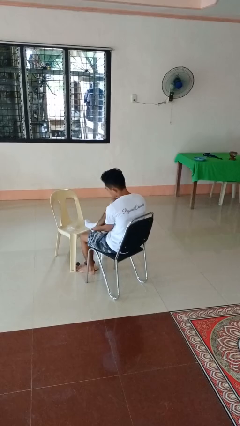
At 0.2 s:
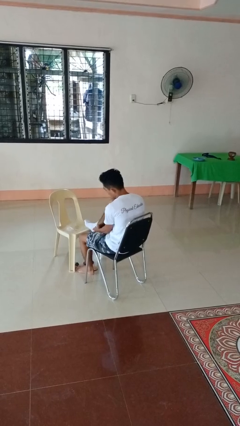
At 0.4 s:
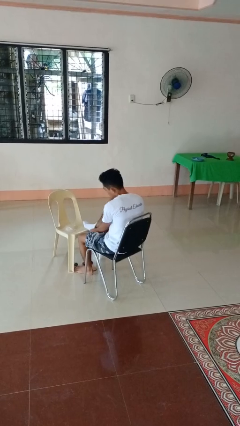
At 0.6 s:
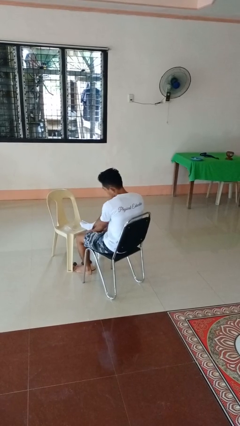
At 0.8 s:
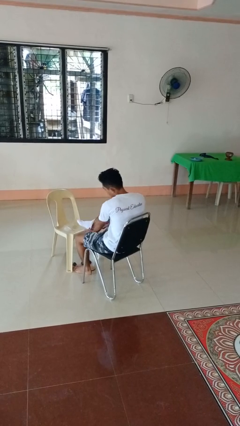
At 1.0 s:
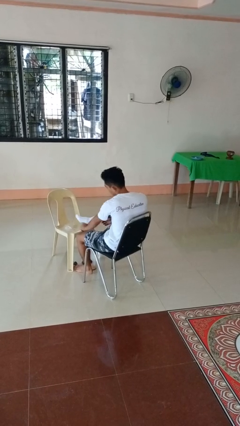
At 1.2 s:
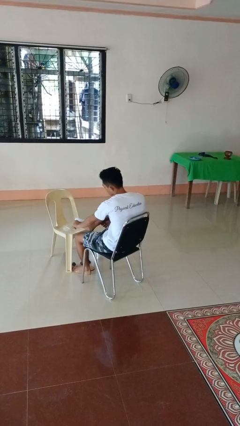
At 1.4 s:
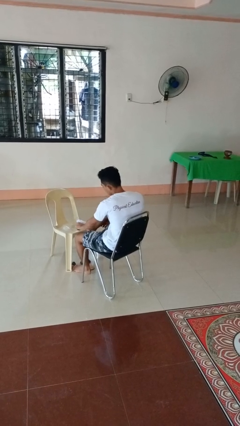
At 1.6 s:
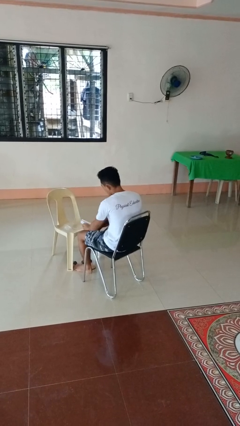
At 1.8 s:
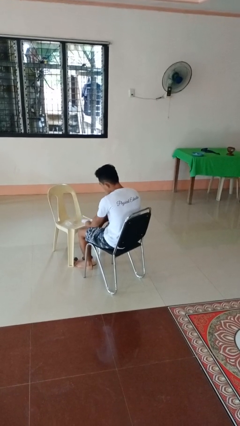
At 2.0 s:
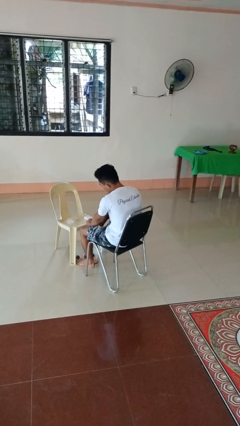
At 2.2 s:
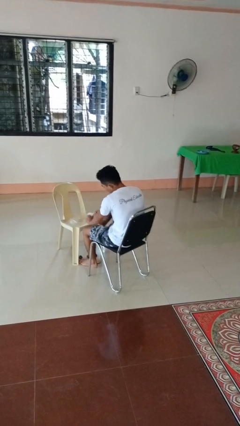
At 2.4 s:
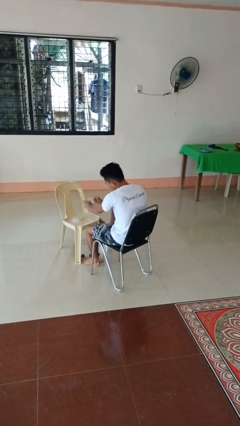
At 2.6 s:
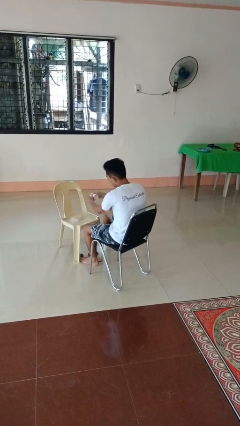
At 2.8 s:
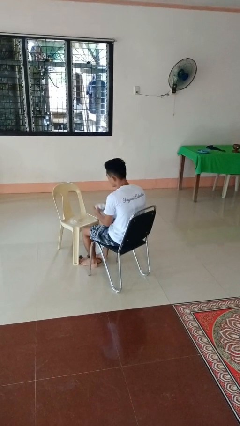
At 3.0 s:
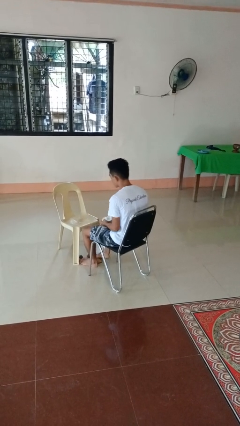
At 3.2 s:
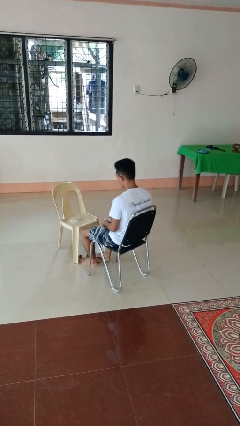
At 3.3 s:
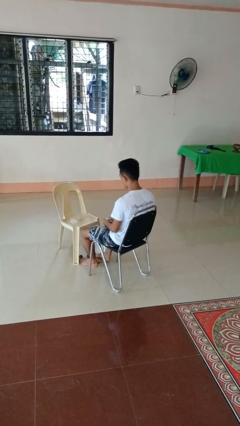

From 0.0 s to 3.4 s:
person takes off socks

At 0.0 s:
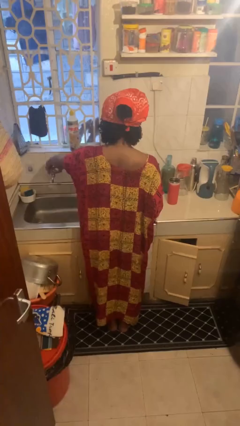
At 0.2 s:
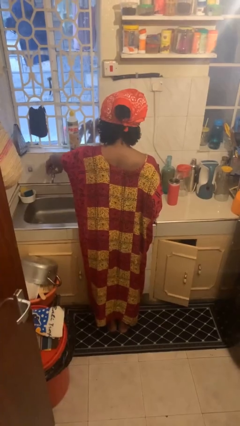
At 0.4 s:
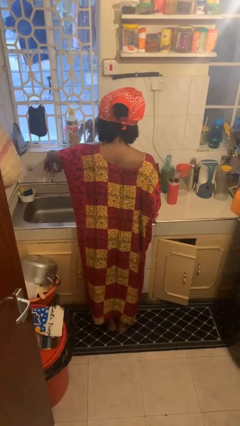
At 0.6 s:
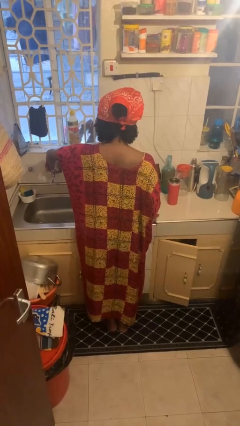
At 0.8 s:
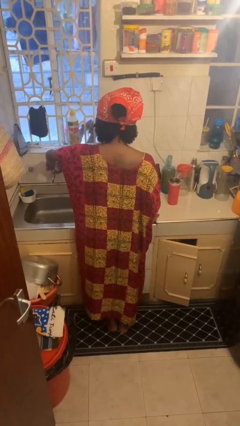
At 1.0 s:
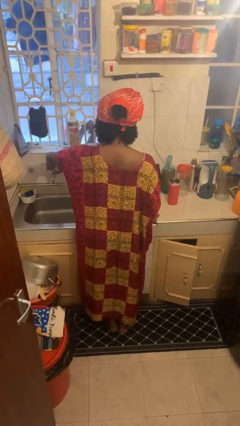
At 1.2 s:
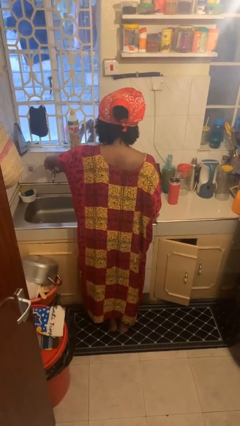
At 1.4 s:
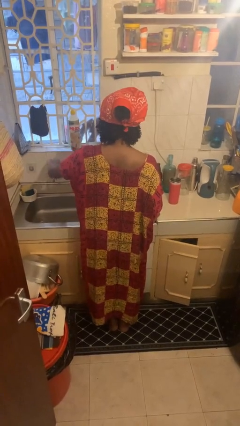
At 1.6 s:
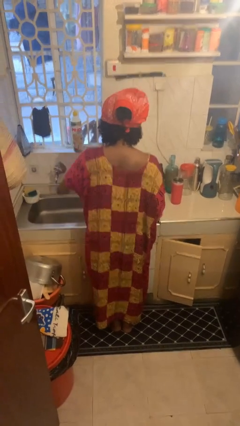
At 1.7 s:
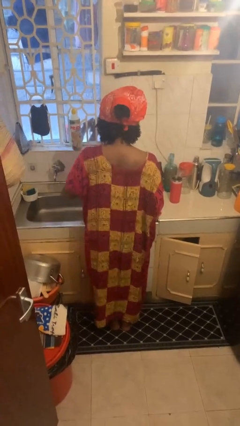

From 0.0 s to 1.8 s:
person turns off faucet

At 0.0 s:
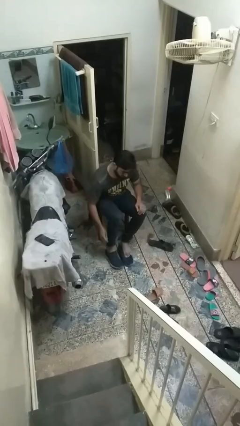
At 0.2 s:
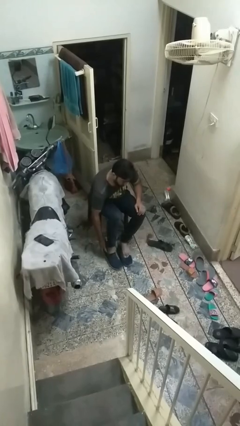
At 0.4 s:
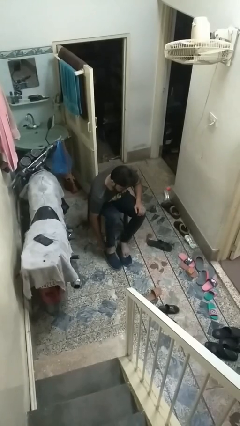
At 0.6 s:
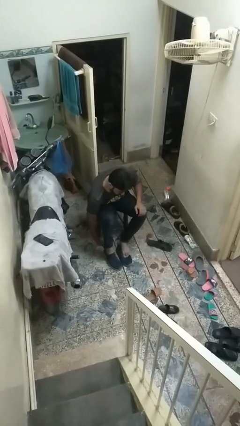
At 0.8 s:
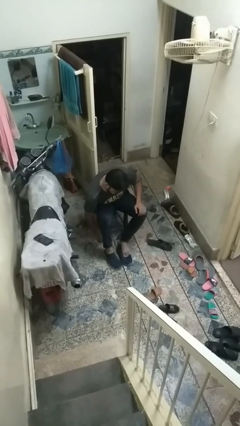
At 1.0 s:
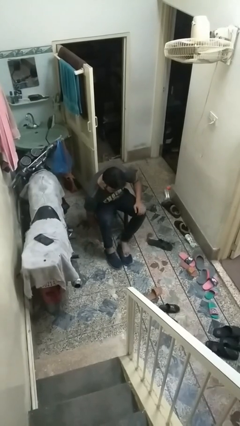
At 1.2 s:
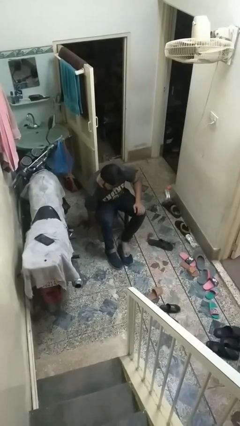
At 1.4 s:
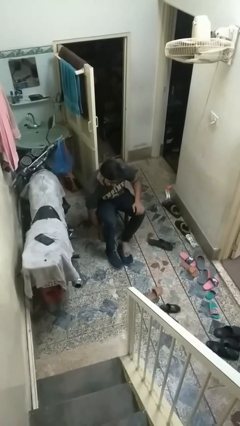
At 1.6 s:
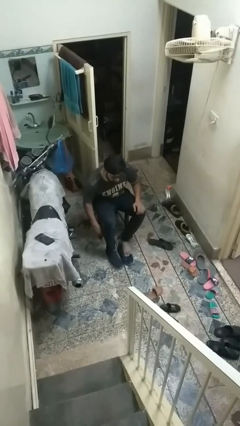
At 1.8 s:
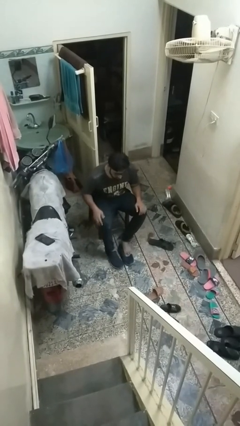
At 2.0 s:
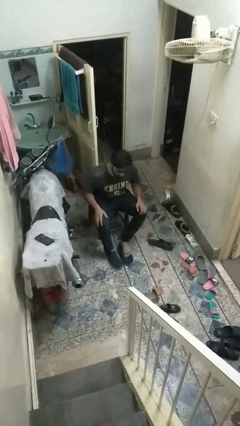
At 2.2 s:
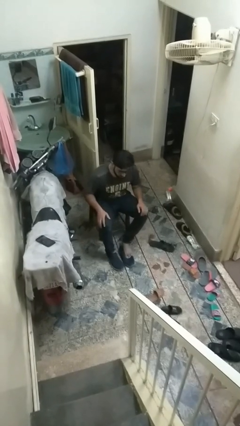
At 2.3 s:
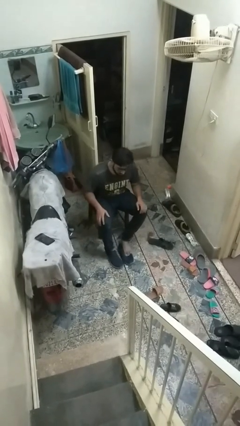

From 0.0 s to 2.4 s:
person puts on shoes

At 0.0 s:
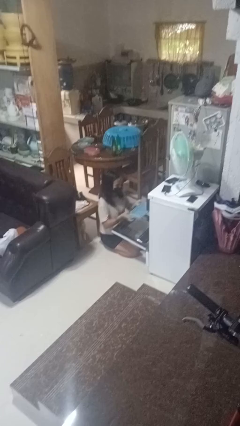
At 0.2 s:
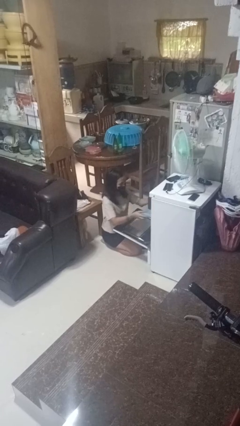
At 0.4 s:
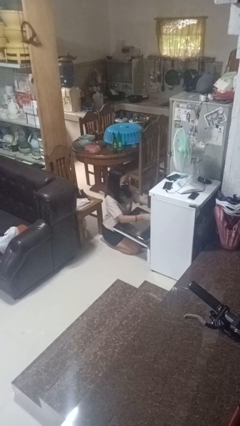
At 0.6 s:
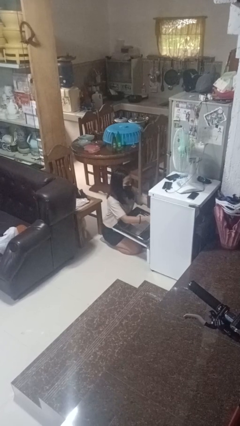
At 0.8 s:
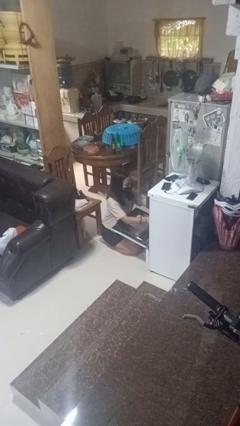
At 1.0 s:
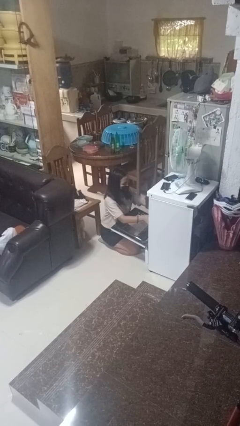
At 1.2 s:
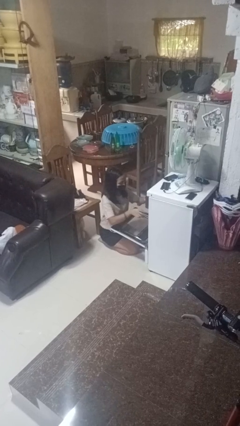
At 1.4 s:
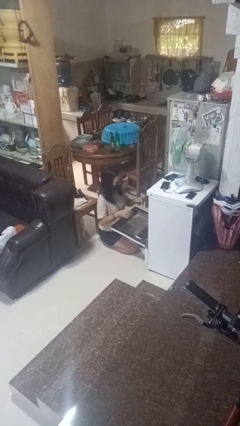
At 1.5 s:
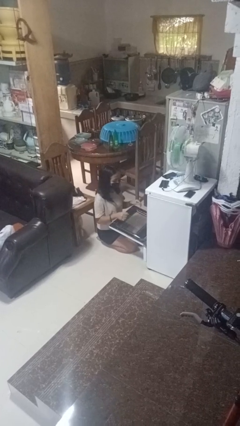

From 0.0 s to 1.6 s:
person puts object into oven

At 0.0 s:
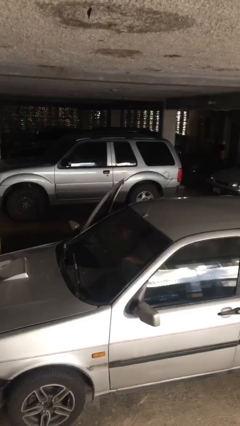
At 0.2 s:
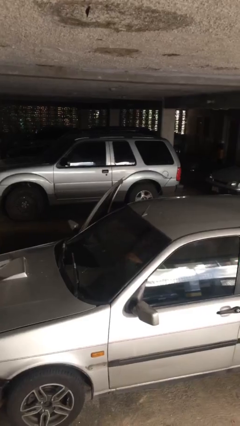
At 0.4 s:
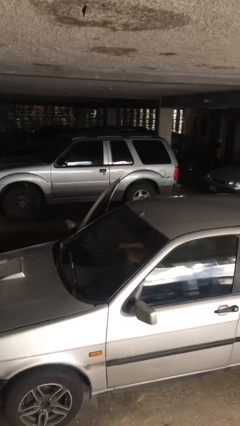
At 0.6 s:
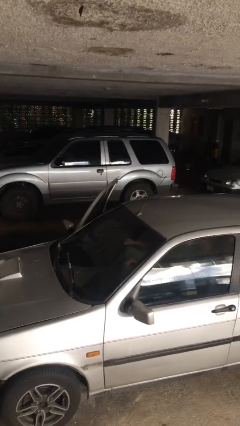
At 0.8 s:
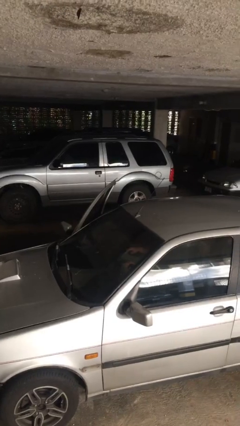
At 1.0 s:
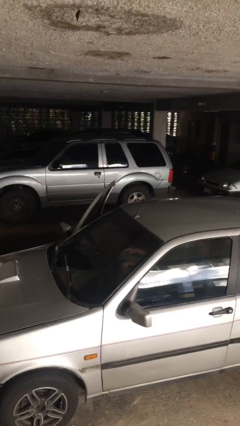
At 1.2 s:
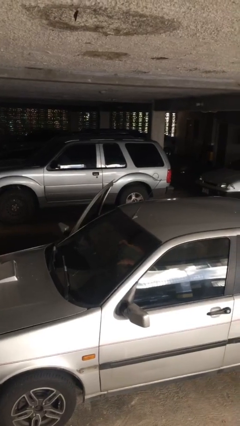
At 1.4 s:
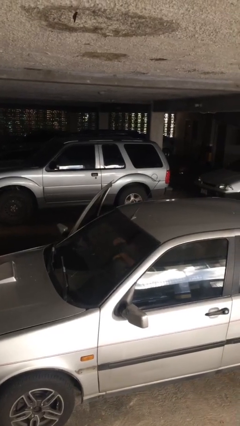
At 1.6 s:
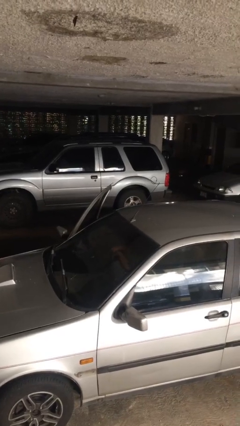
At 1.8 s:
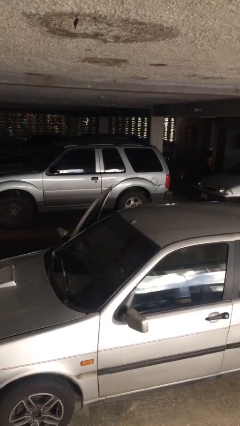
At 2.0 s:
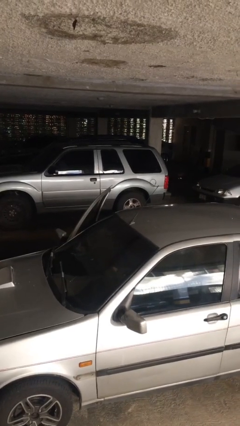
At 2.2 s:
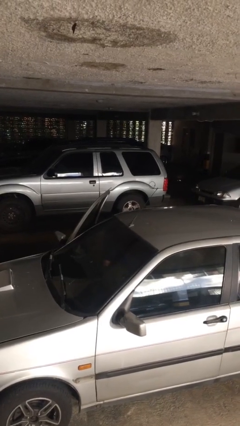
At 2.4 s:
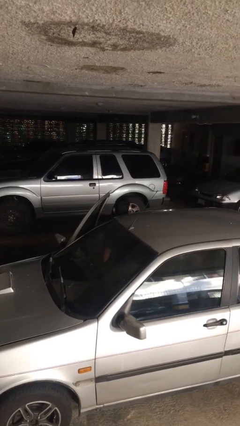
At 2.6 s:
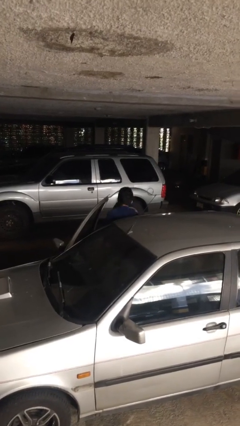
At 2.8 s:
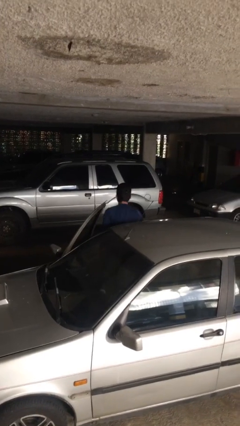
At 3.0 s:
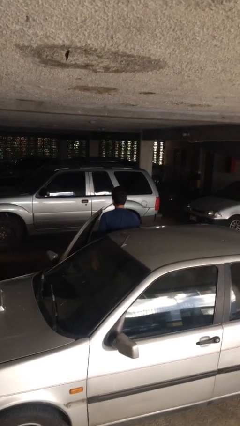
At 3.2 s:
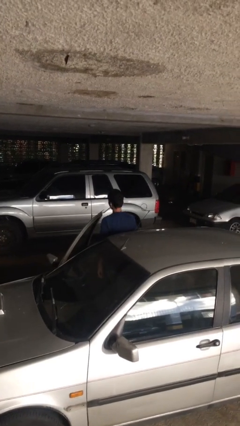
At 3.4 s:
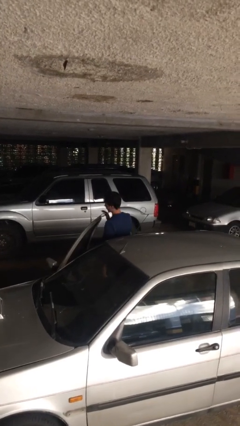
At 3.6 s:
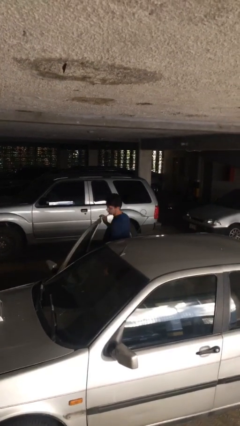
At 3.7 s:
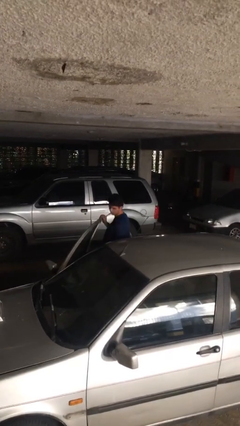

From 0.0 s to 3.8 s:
person exits car

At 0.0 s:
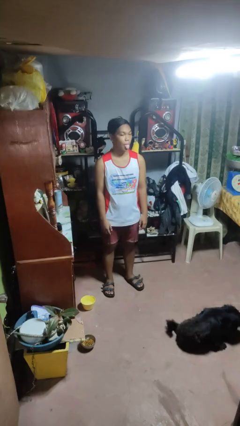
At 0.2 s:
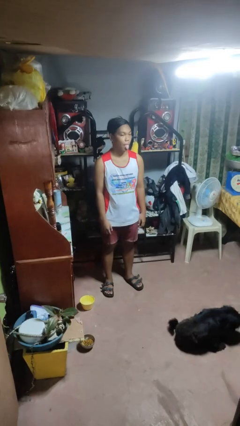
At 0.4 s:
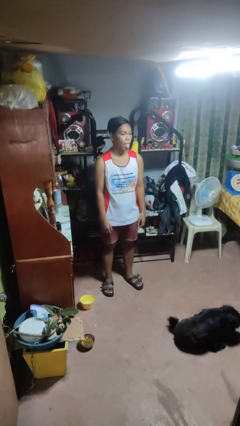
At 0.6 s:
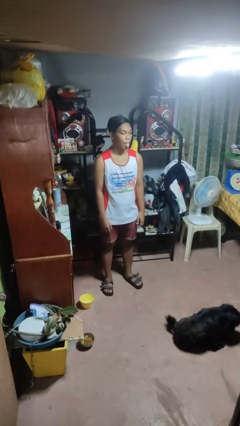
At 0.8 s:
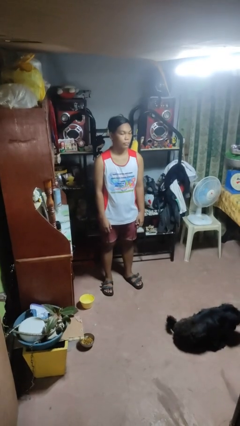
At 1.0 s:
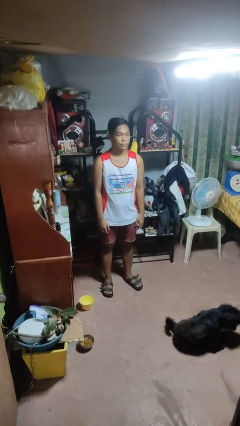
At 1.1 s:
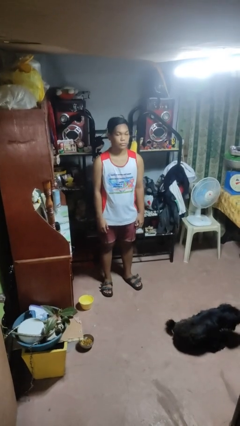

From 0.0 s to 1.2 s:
person sticks out tongue

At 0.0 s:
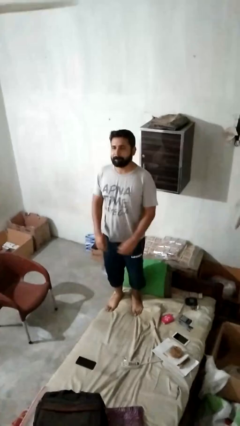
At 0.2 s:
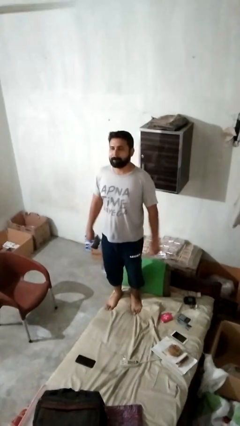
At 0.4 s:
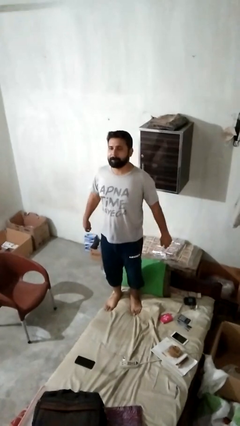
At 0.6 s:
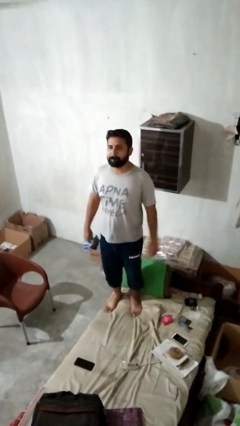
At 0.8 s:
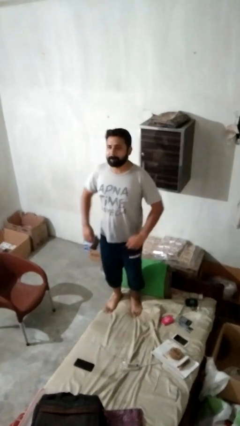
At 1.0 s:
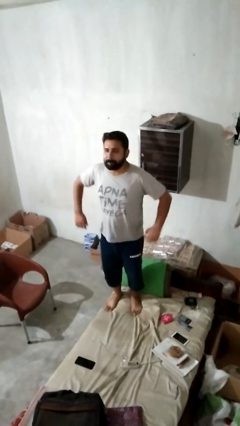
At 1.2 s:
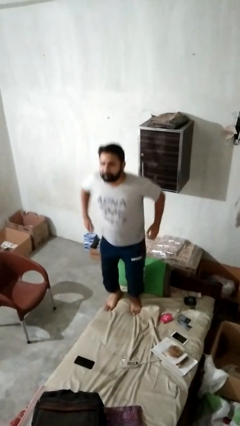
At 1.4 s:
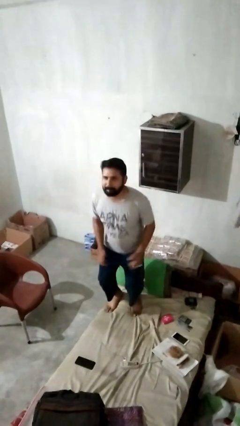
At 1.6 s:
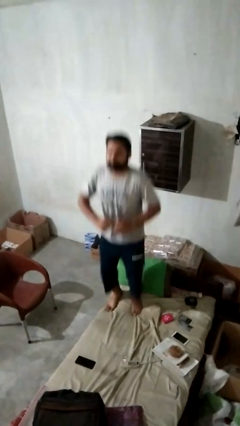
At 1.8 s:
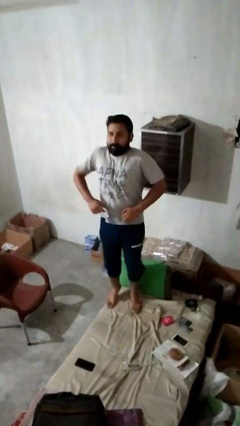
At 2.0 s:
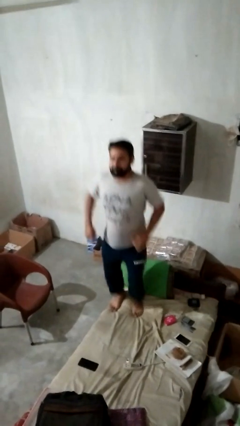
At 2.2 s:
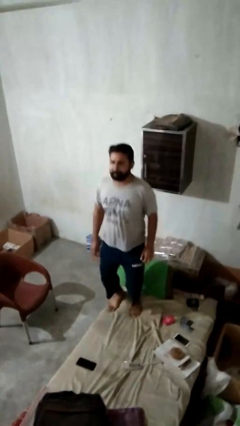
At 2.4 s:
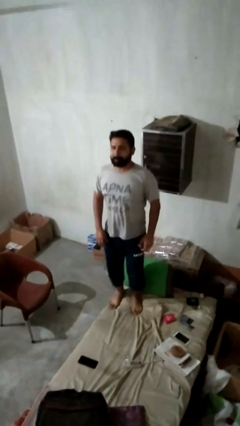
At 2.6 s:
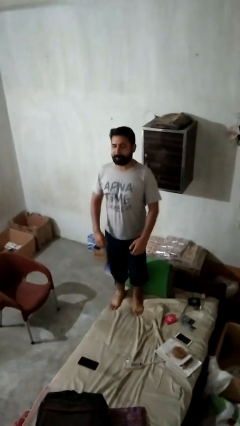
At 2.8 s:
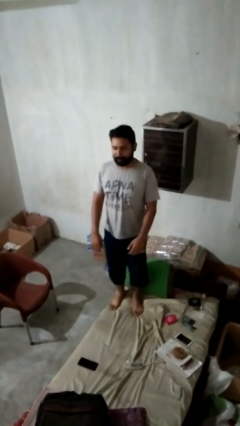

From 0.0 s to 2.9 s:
person jumps on bed
